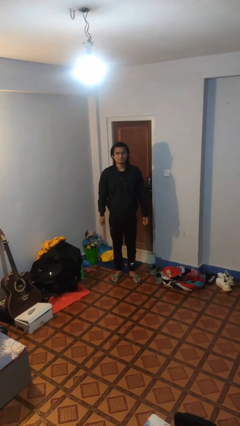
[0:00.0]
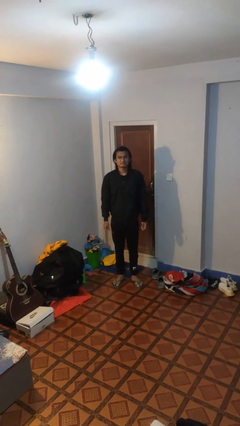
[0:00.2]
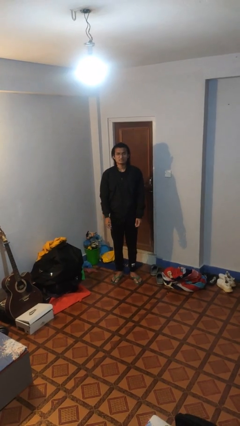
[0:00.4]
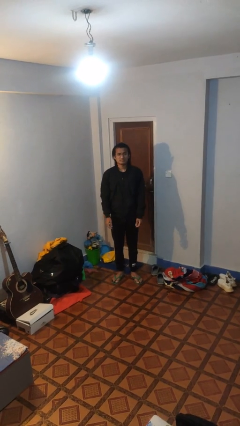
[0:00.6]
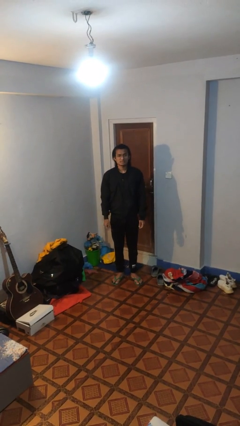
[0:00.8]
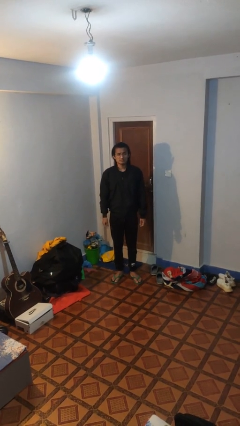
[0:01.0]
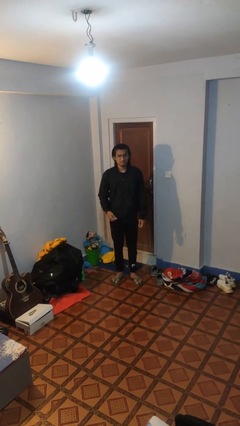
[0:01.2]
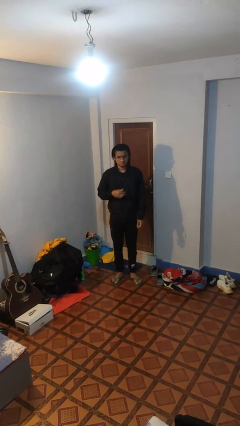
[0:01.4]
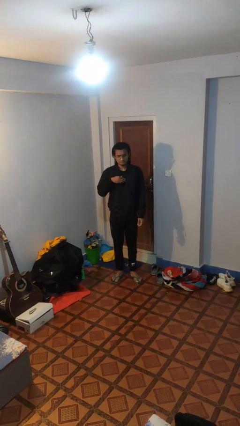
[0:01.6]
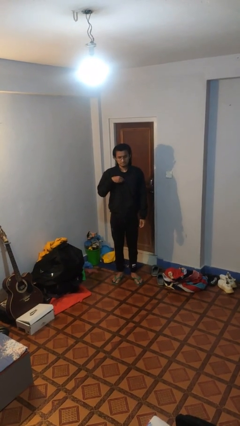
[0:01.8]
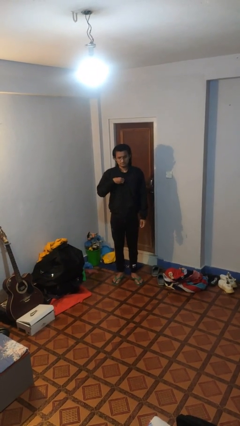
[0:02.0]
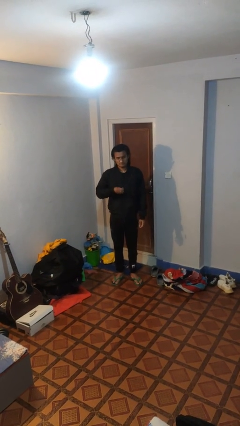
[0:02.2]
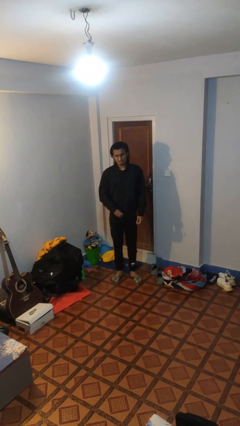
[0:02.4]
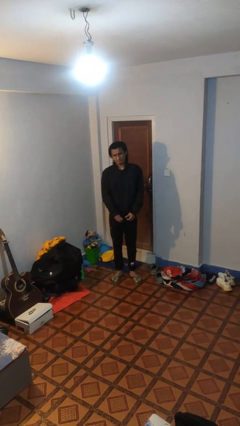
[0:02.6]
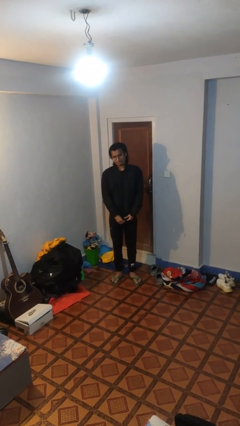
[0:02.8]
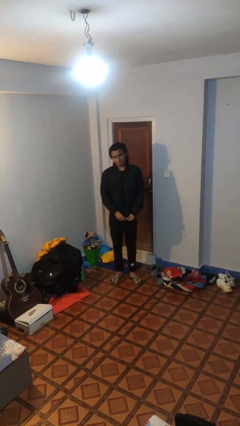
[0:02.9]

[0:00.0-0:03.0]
person unzips jacket

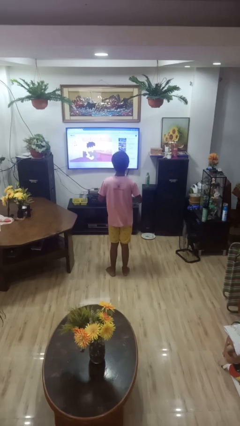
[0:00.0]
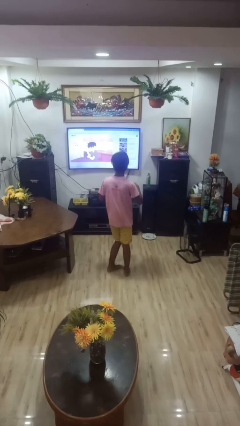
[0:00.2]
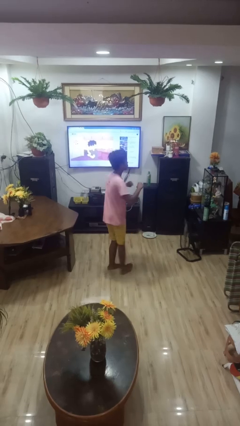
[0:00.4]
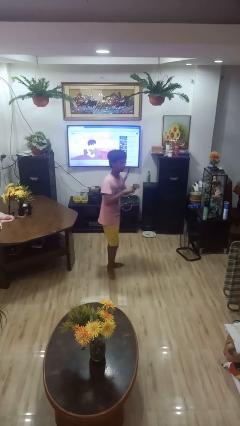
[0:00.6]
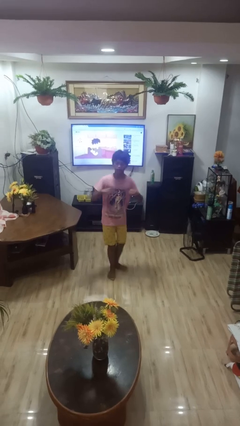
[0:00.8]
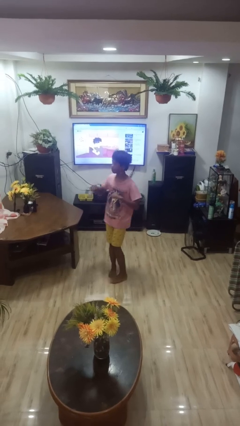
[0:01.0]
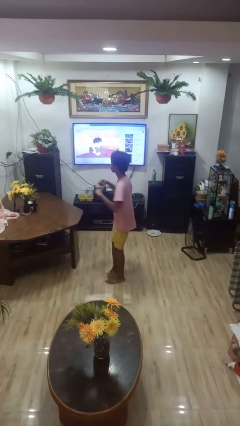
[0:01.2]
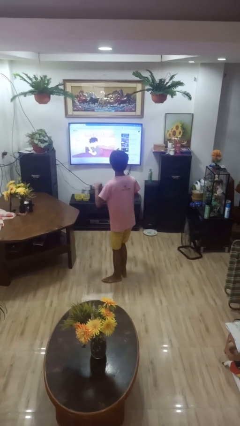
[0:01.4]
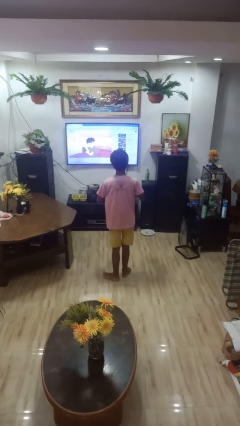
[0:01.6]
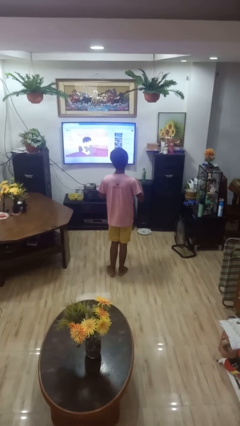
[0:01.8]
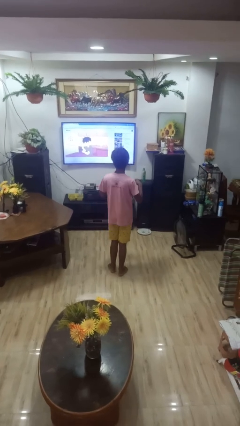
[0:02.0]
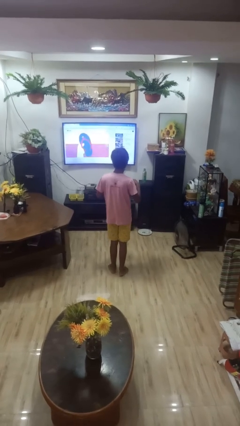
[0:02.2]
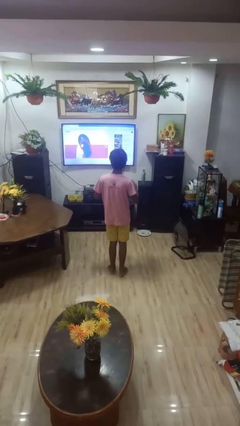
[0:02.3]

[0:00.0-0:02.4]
person twirls

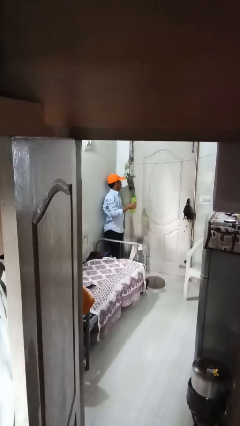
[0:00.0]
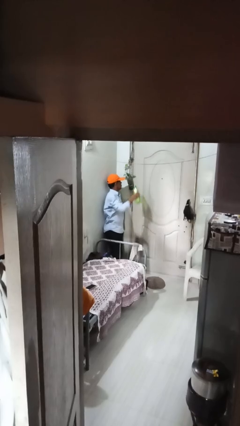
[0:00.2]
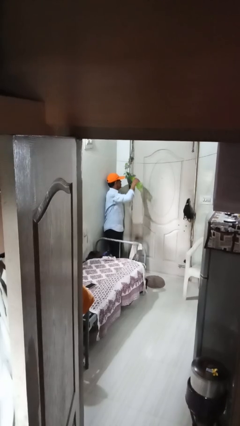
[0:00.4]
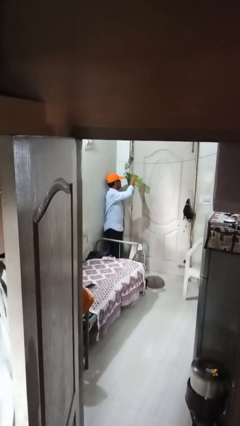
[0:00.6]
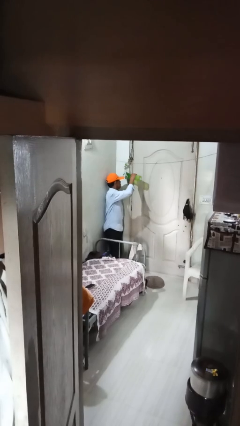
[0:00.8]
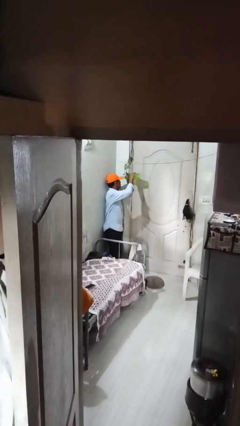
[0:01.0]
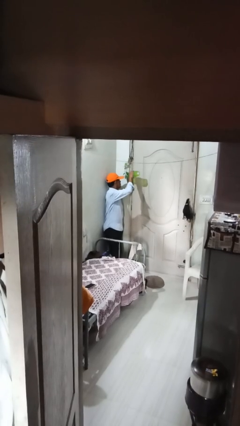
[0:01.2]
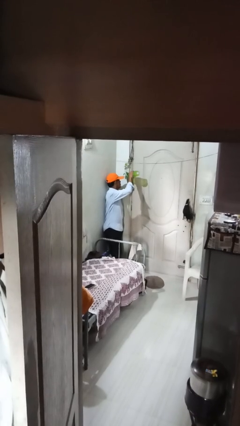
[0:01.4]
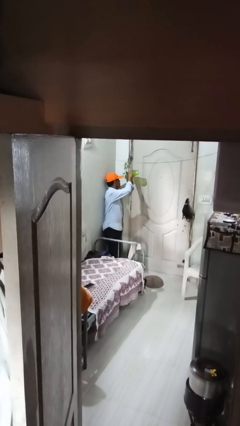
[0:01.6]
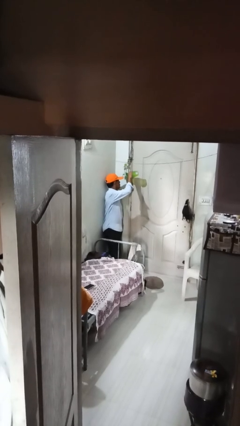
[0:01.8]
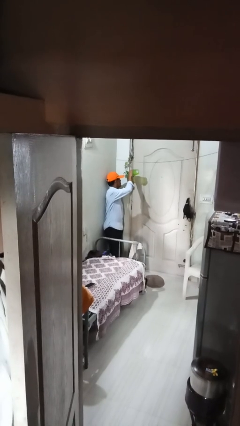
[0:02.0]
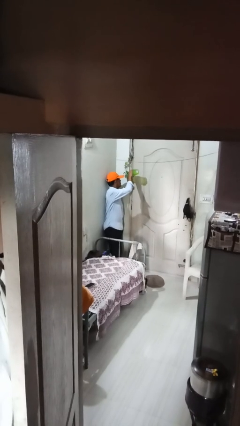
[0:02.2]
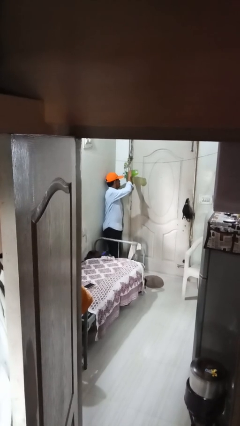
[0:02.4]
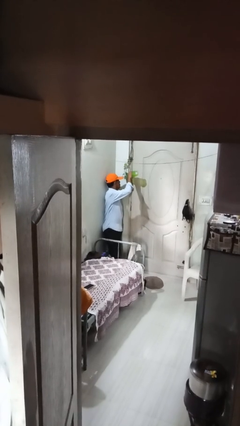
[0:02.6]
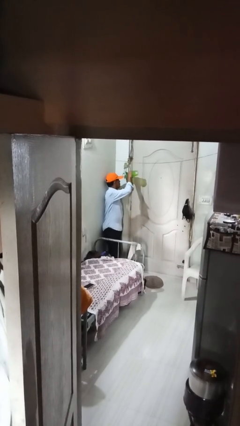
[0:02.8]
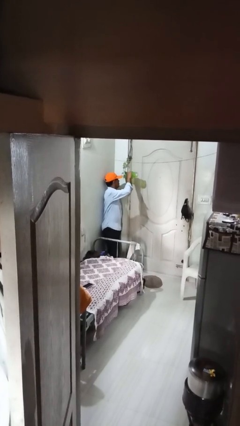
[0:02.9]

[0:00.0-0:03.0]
person waters houseplant

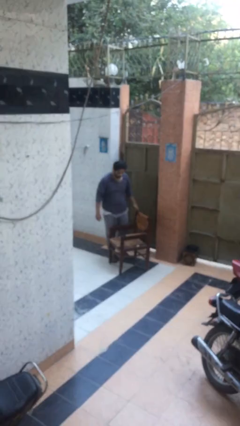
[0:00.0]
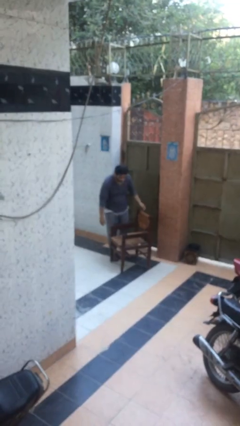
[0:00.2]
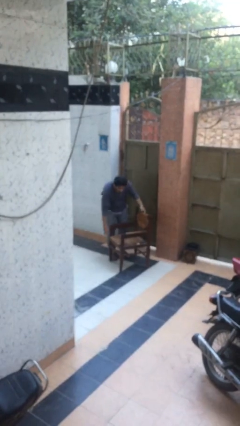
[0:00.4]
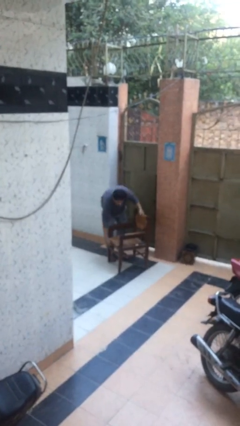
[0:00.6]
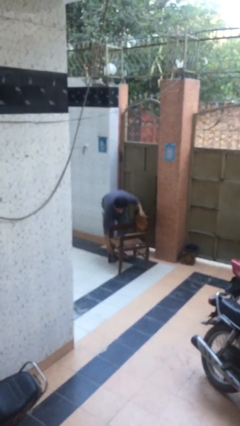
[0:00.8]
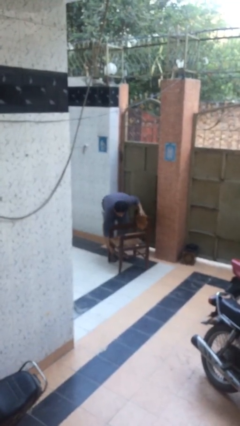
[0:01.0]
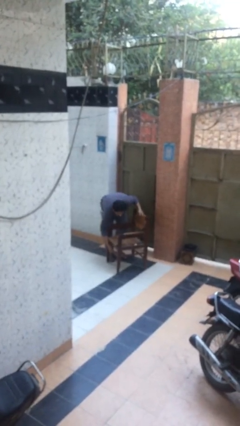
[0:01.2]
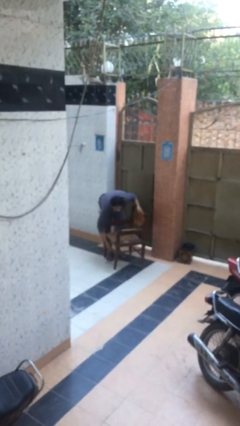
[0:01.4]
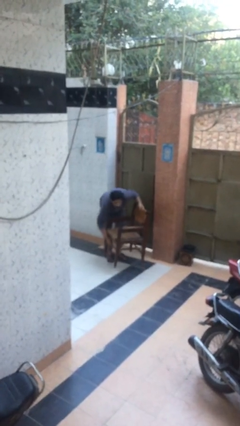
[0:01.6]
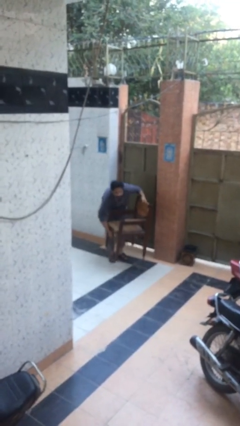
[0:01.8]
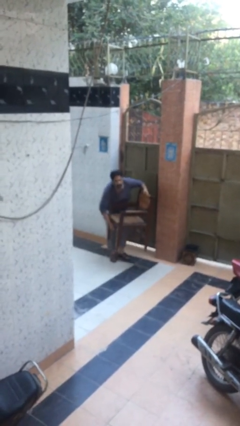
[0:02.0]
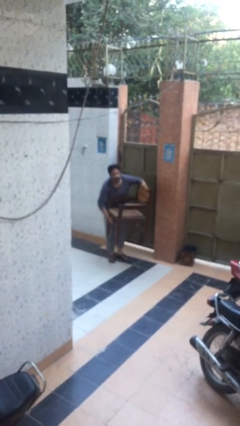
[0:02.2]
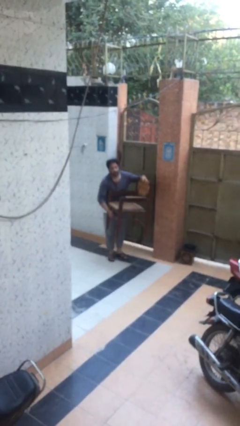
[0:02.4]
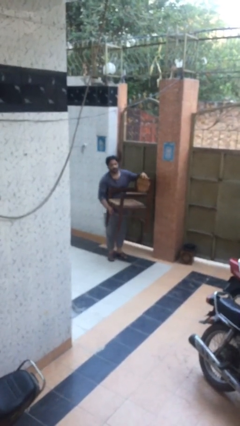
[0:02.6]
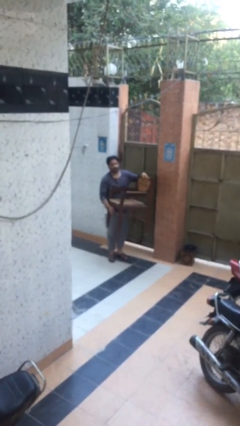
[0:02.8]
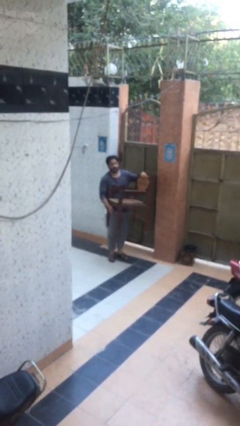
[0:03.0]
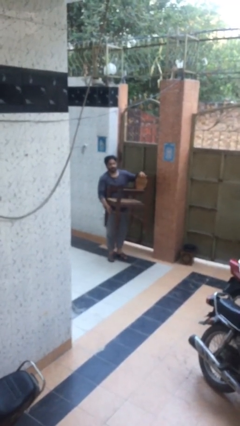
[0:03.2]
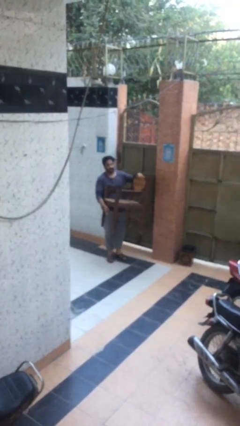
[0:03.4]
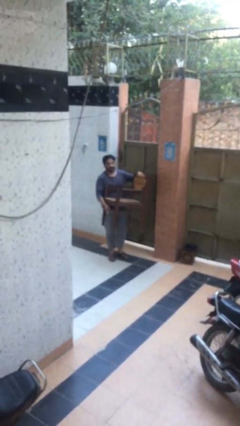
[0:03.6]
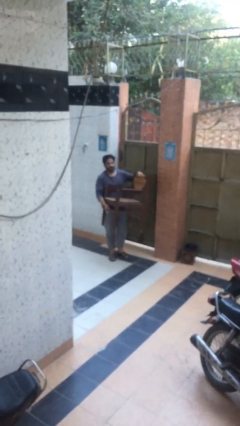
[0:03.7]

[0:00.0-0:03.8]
person picks up object from floor

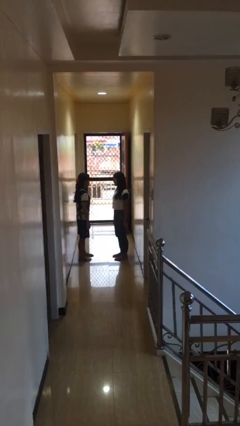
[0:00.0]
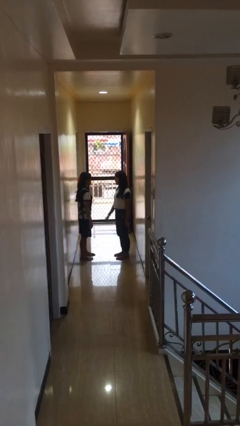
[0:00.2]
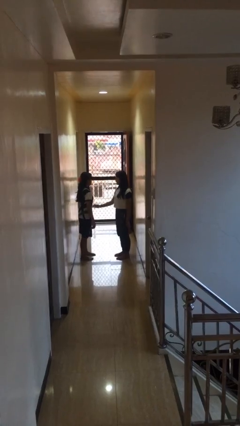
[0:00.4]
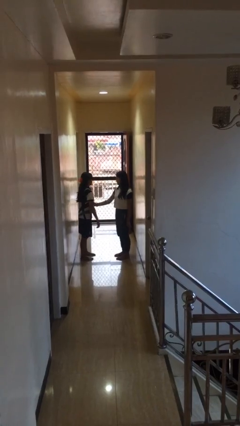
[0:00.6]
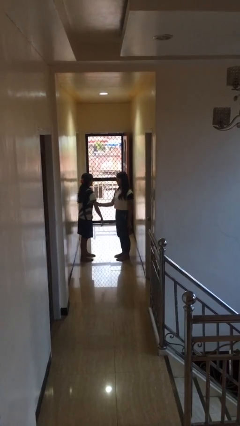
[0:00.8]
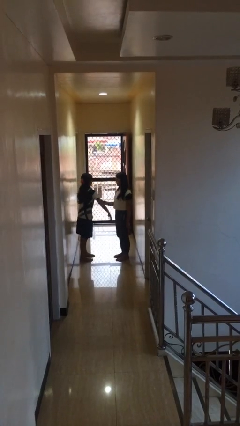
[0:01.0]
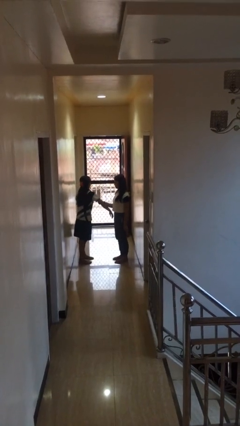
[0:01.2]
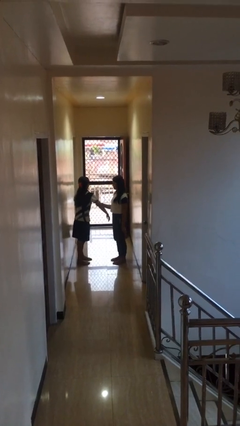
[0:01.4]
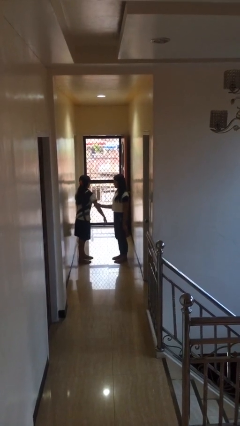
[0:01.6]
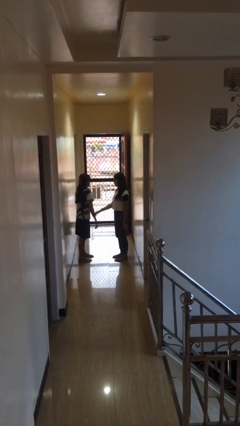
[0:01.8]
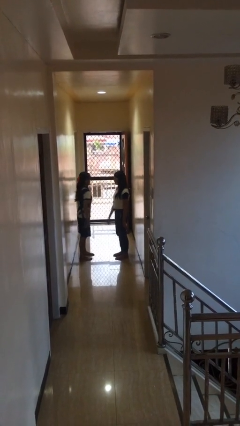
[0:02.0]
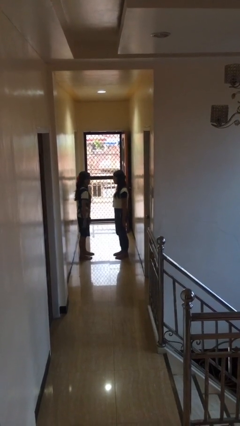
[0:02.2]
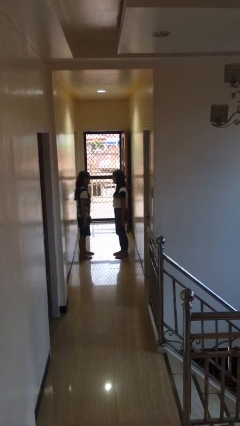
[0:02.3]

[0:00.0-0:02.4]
person grabs person by bicep

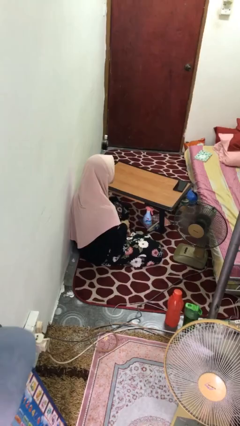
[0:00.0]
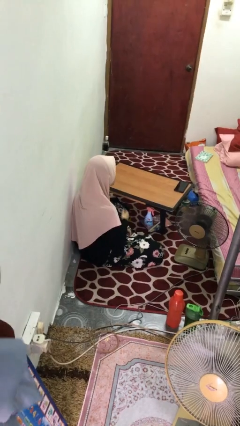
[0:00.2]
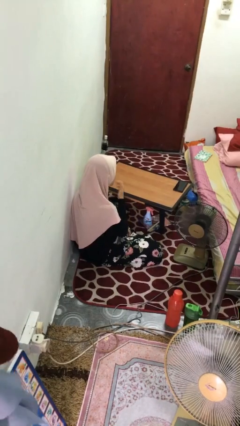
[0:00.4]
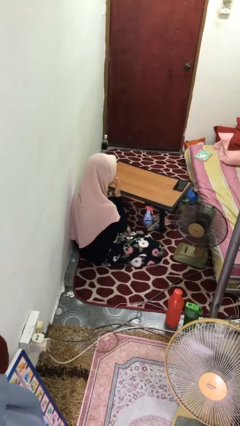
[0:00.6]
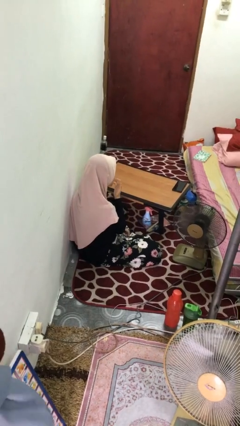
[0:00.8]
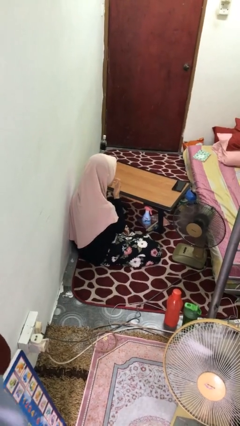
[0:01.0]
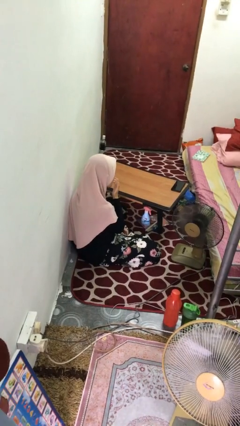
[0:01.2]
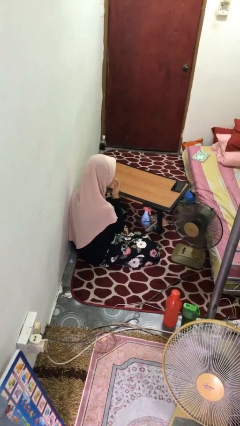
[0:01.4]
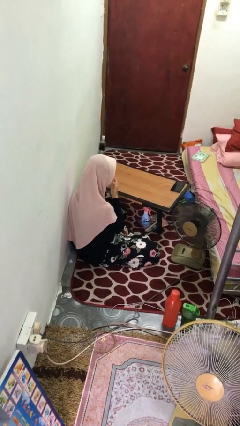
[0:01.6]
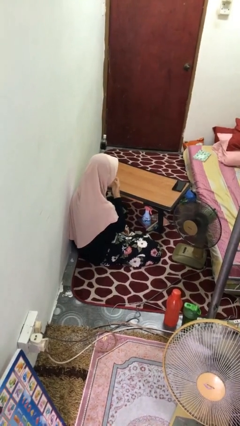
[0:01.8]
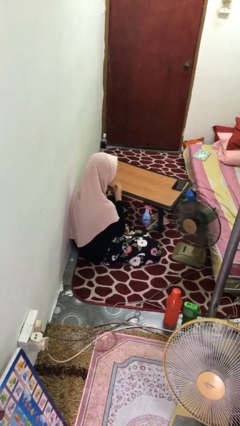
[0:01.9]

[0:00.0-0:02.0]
person licks fingers

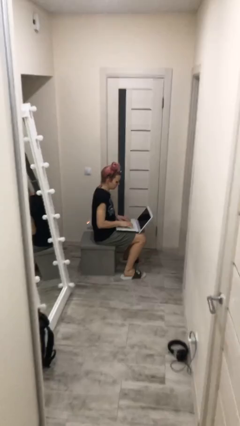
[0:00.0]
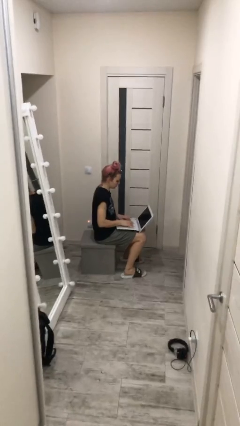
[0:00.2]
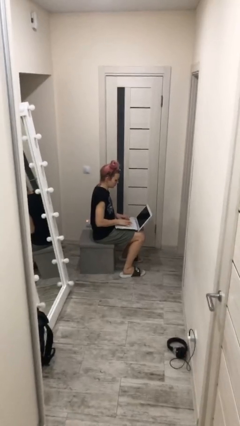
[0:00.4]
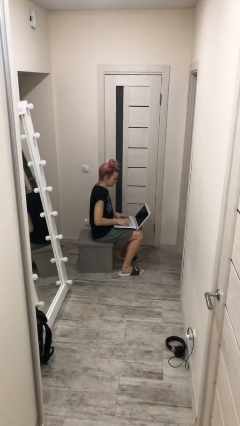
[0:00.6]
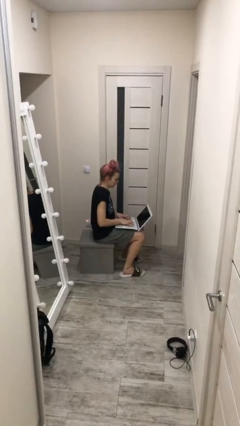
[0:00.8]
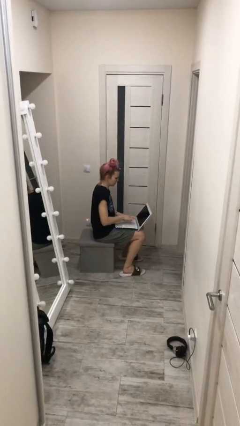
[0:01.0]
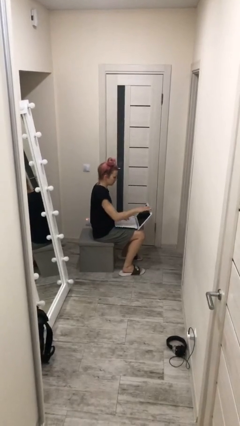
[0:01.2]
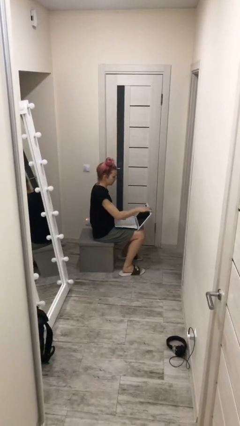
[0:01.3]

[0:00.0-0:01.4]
person interacts with laptop
